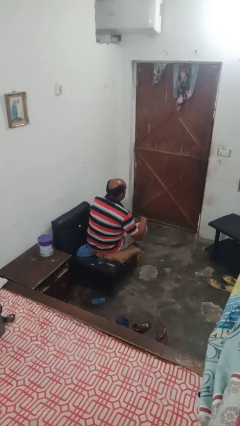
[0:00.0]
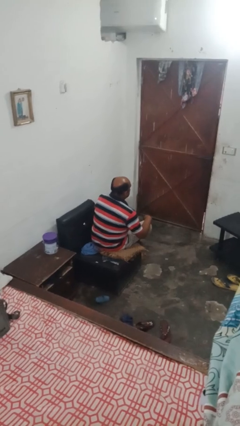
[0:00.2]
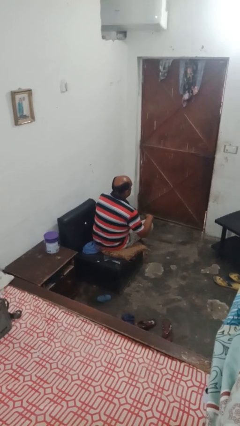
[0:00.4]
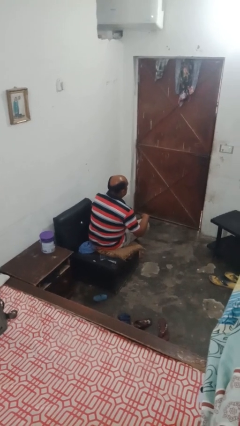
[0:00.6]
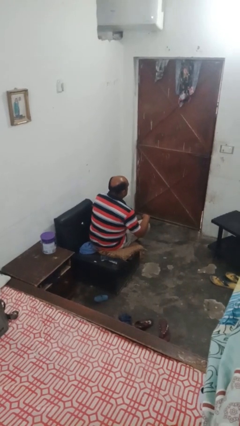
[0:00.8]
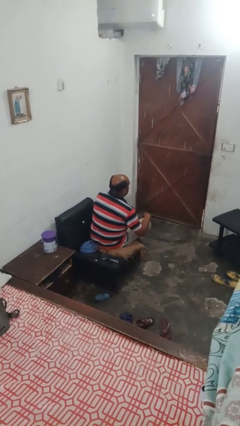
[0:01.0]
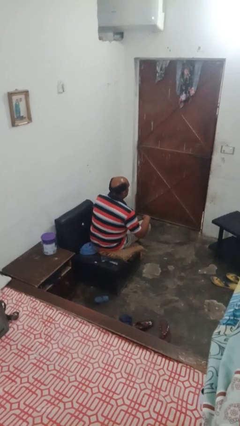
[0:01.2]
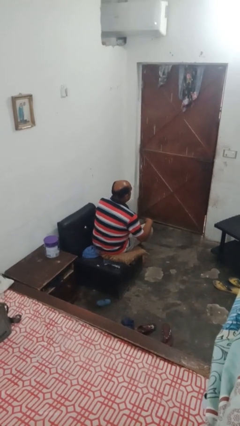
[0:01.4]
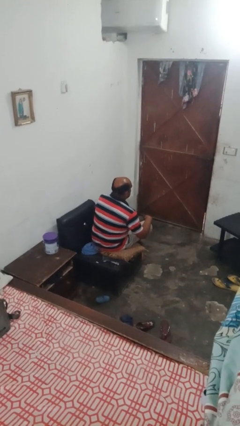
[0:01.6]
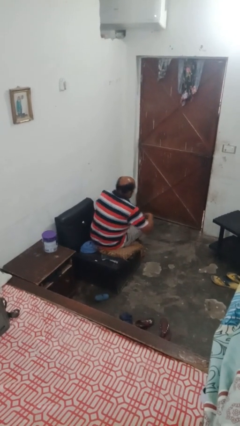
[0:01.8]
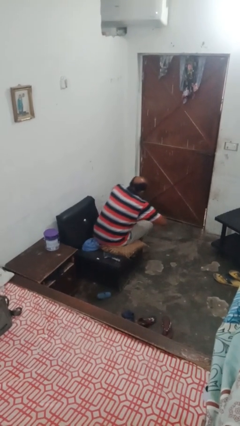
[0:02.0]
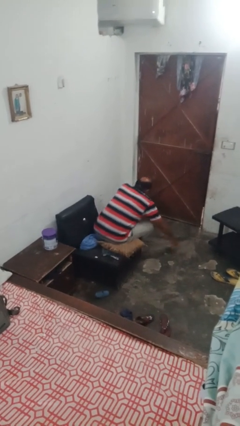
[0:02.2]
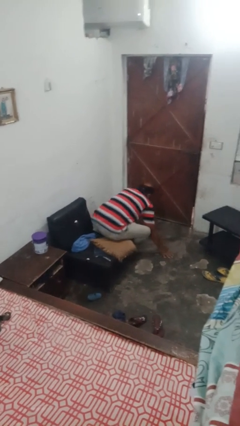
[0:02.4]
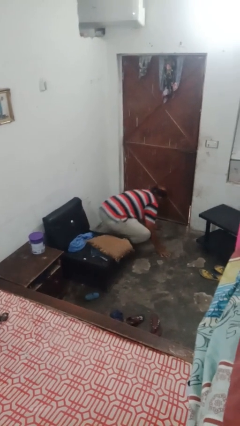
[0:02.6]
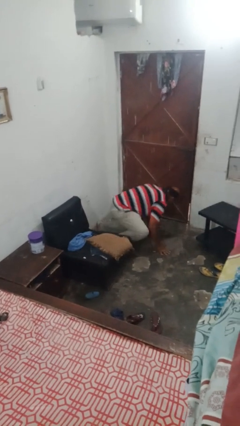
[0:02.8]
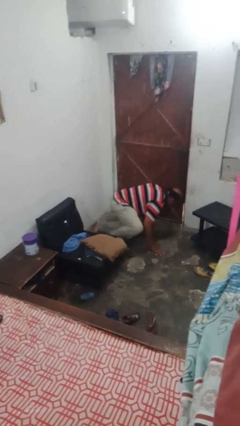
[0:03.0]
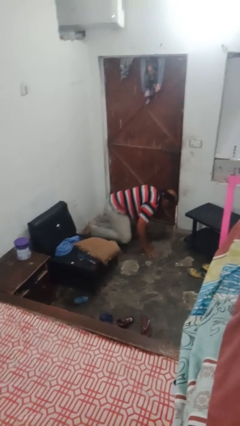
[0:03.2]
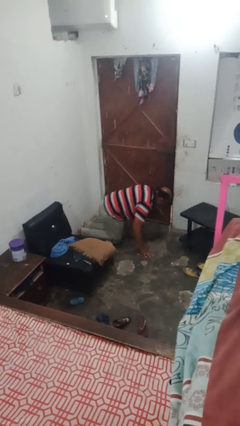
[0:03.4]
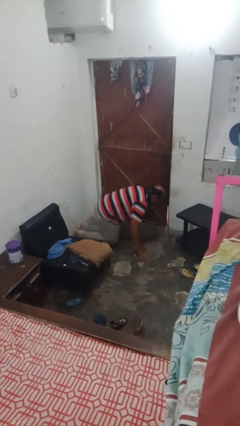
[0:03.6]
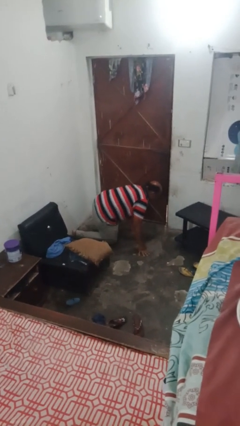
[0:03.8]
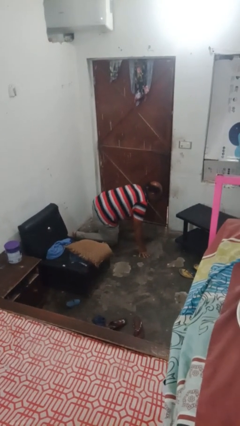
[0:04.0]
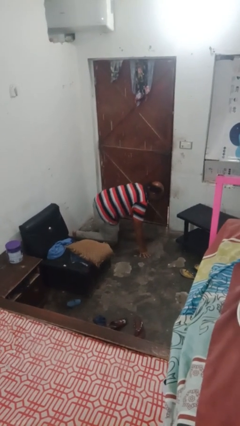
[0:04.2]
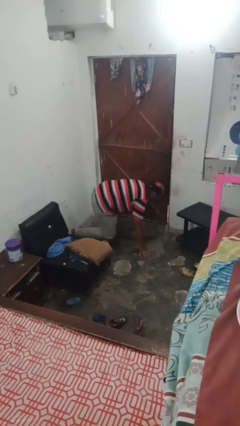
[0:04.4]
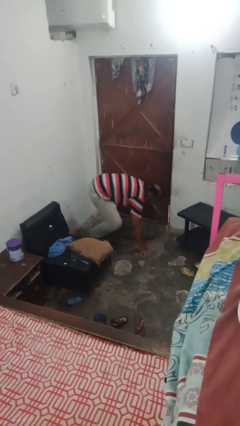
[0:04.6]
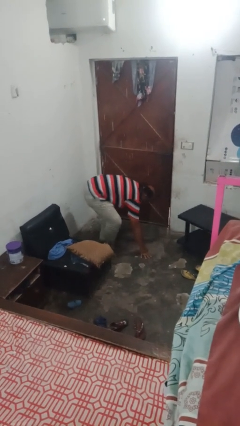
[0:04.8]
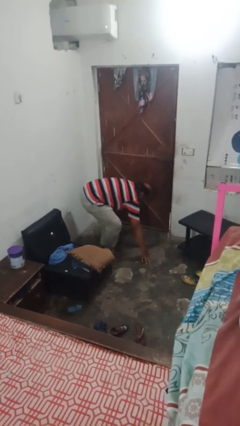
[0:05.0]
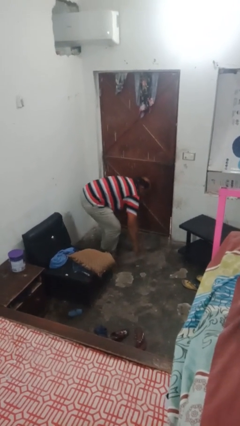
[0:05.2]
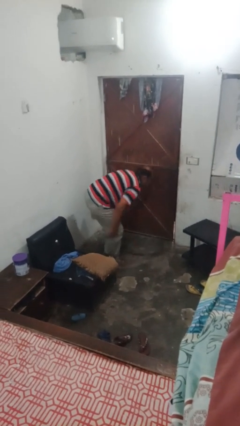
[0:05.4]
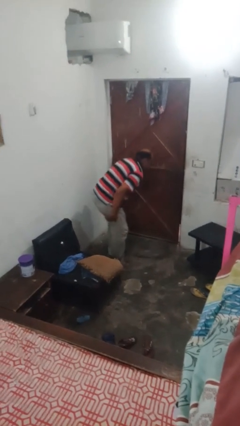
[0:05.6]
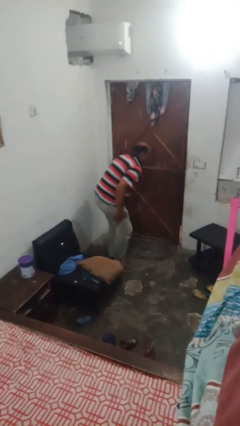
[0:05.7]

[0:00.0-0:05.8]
person falls from chair

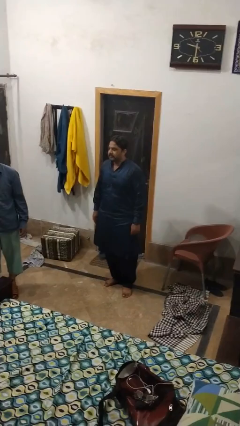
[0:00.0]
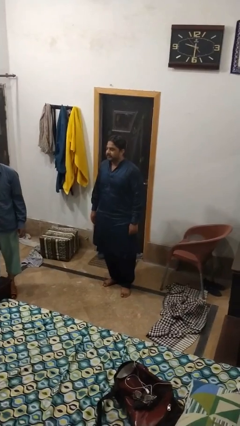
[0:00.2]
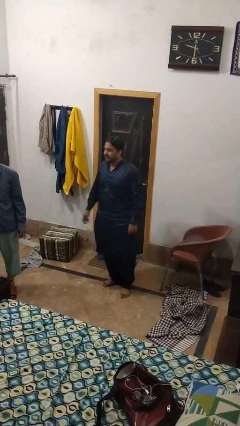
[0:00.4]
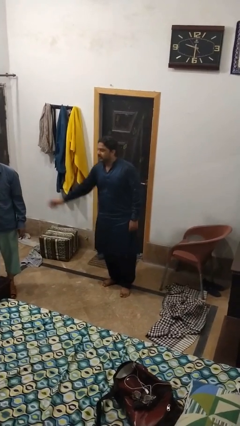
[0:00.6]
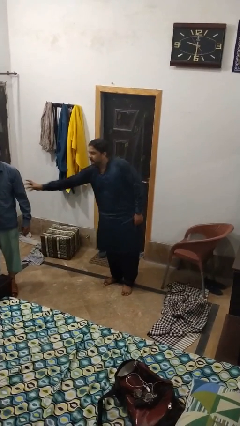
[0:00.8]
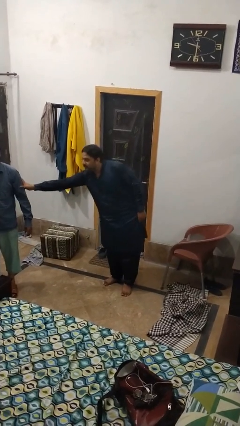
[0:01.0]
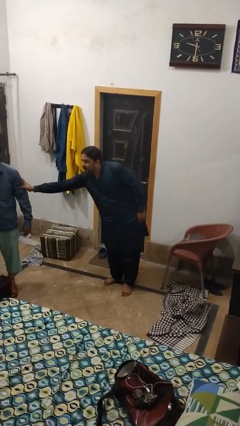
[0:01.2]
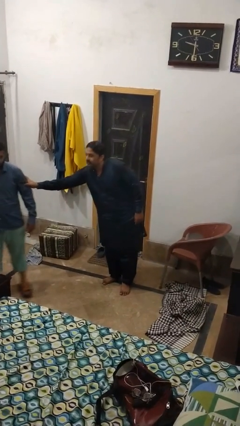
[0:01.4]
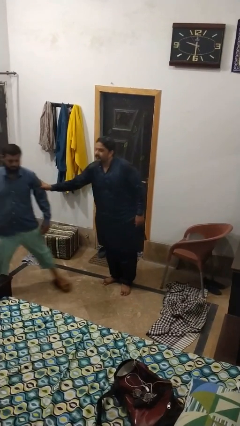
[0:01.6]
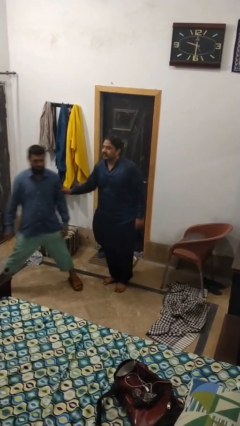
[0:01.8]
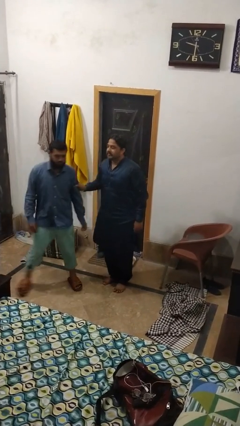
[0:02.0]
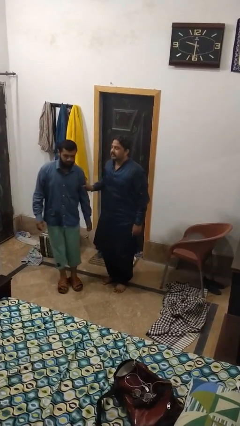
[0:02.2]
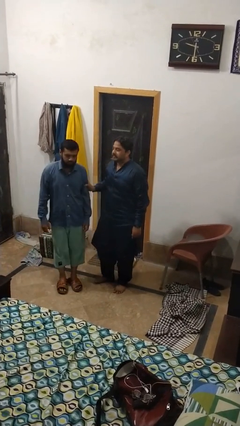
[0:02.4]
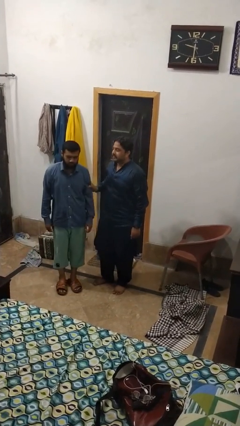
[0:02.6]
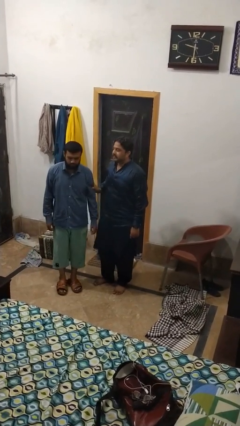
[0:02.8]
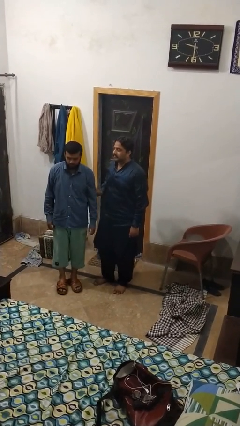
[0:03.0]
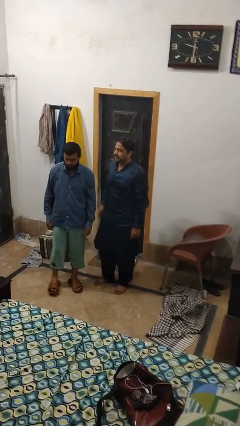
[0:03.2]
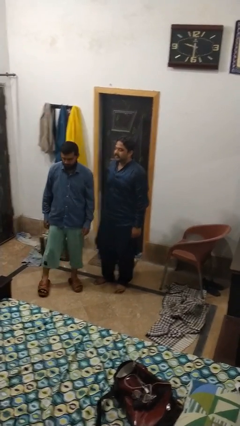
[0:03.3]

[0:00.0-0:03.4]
person grabs person by hair

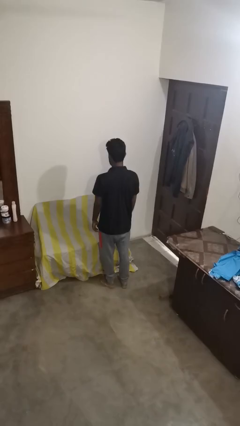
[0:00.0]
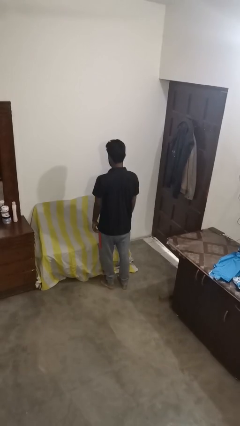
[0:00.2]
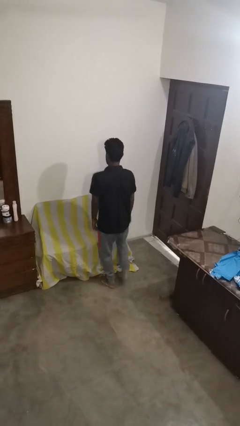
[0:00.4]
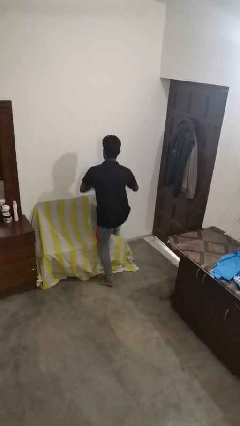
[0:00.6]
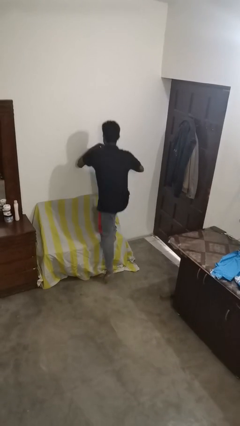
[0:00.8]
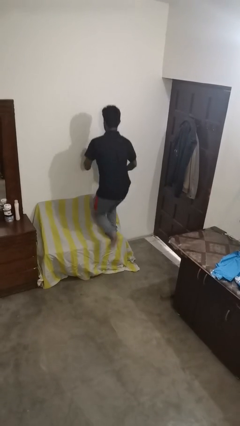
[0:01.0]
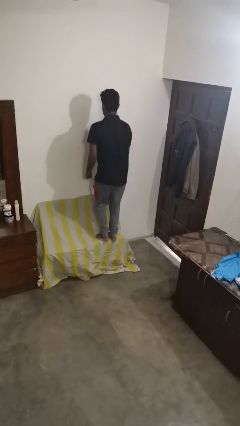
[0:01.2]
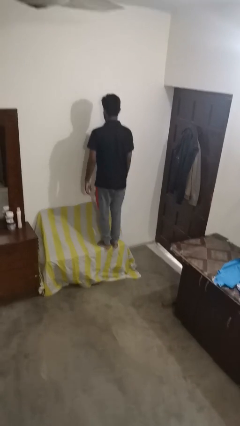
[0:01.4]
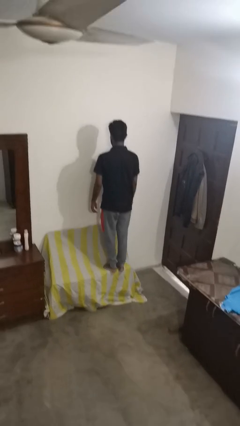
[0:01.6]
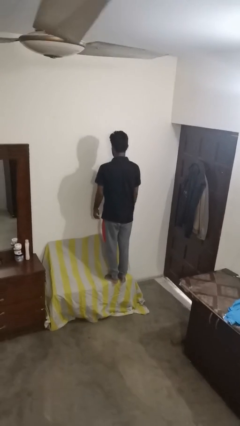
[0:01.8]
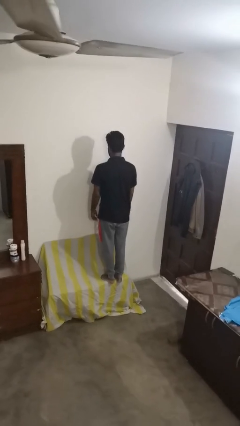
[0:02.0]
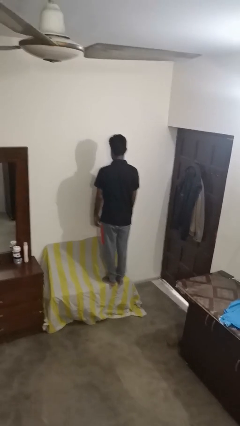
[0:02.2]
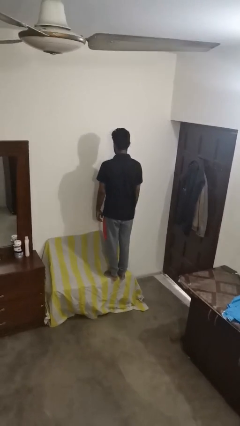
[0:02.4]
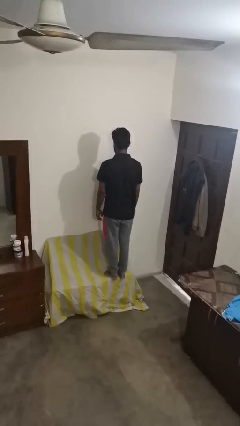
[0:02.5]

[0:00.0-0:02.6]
person jumps on couch

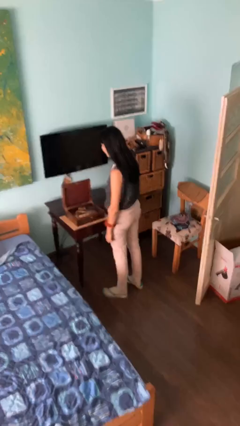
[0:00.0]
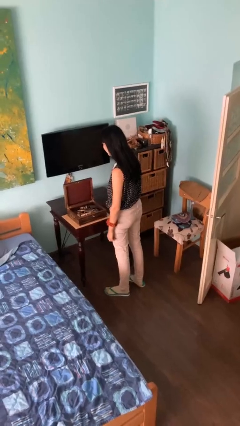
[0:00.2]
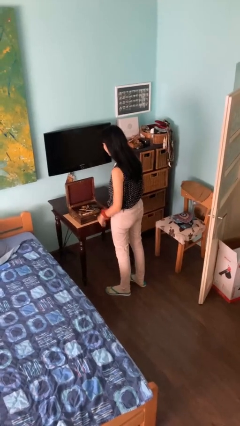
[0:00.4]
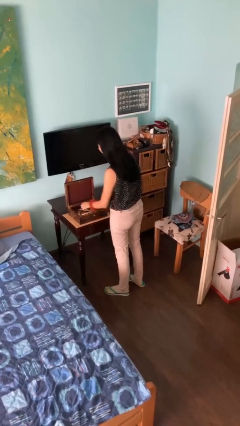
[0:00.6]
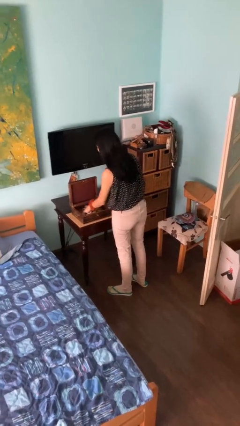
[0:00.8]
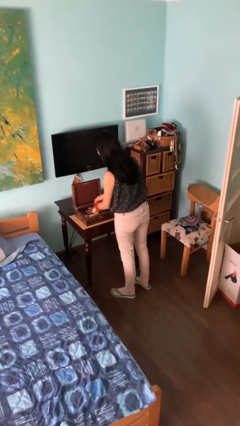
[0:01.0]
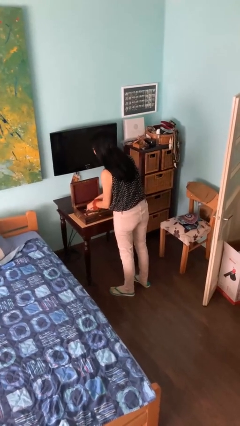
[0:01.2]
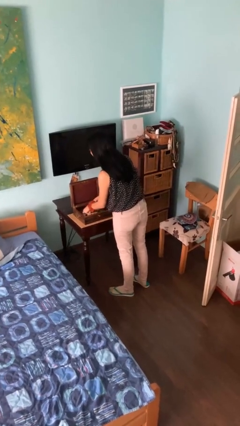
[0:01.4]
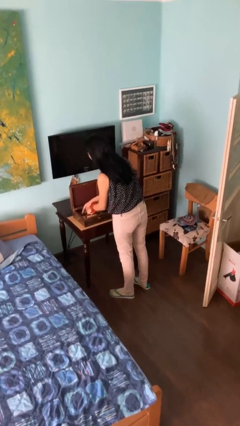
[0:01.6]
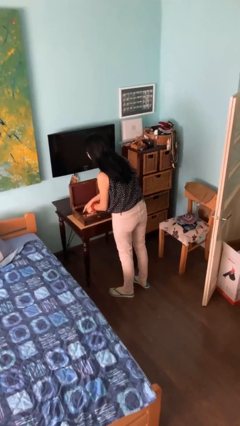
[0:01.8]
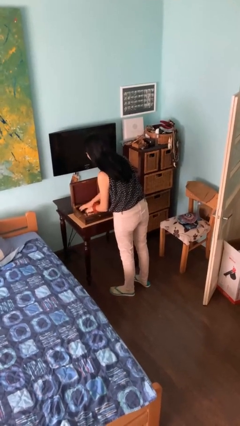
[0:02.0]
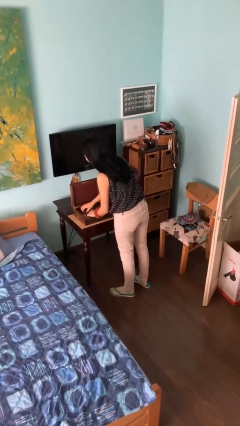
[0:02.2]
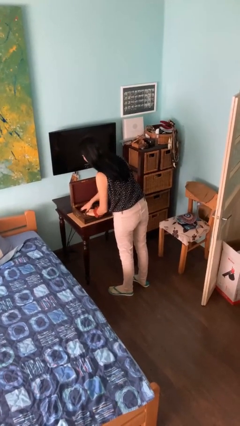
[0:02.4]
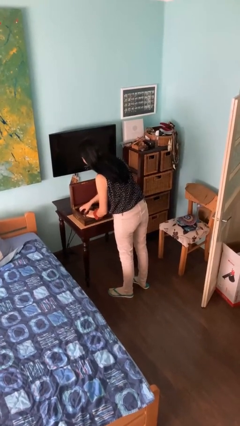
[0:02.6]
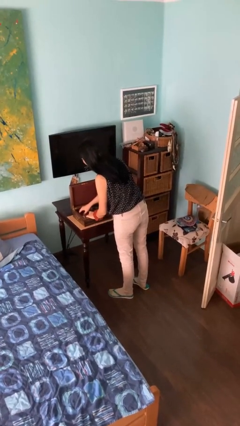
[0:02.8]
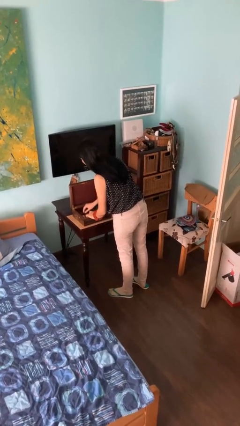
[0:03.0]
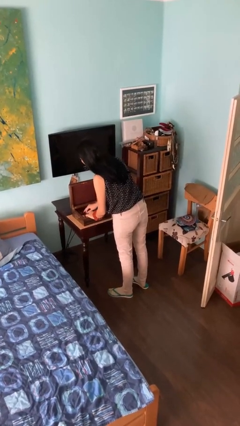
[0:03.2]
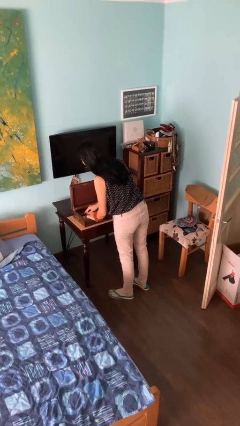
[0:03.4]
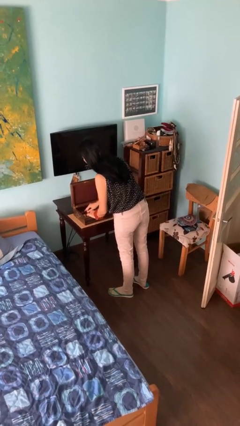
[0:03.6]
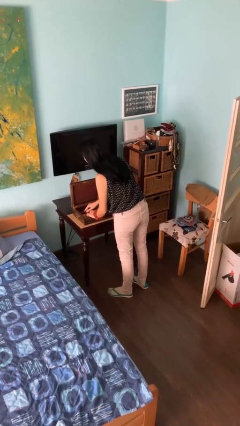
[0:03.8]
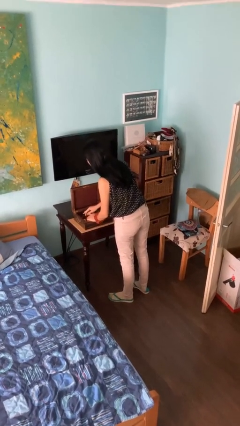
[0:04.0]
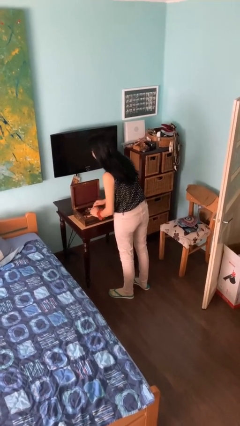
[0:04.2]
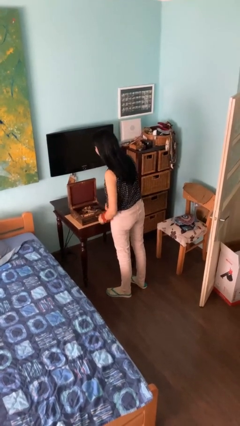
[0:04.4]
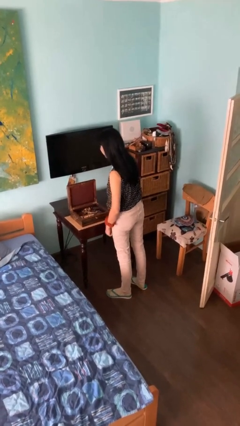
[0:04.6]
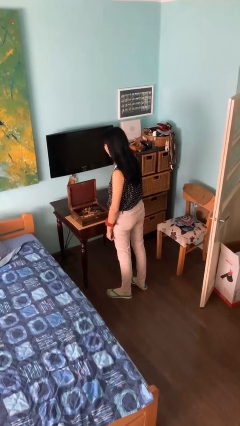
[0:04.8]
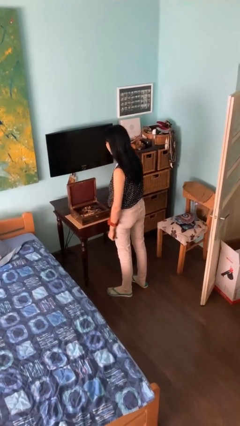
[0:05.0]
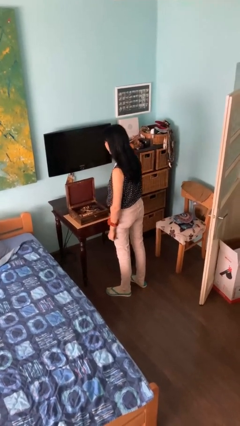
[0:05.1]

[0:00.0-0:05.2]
person searches jewelry box

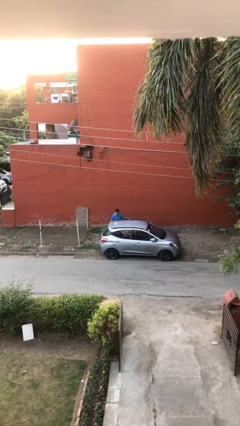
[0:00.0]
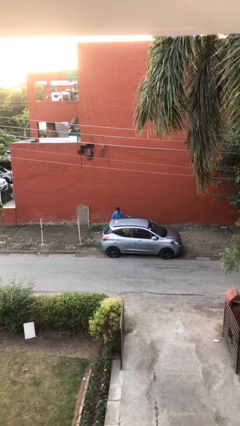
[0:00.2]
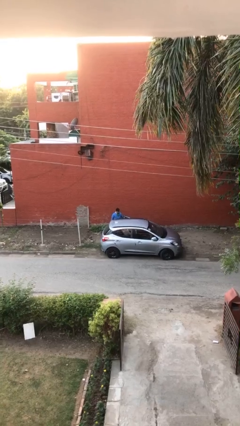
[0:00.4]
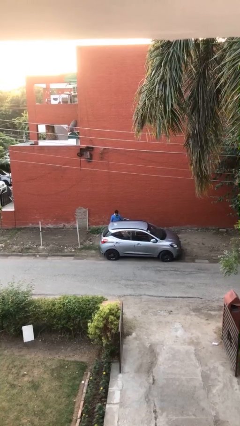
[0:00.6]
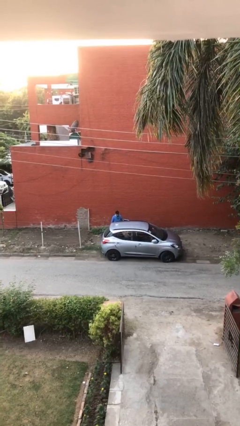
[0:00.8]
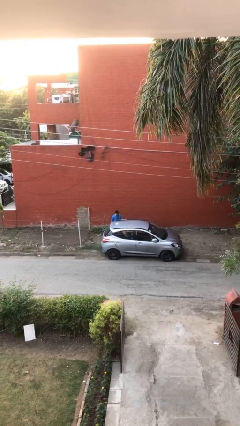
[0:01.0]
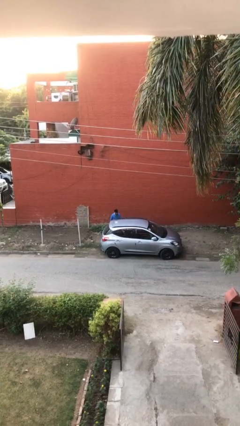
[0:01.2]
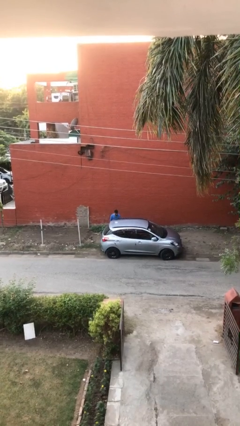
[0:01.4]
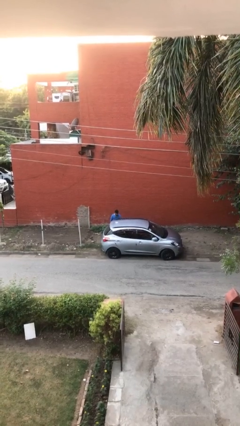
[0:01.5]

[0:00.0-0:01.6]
person closes car door
